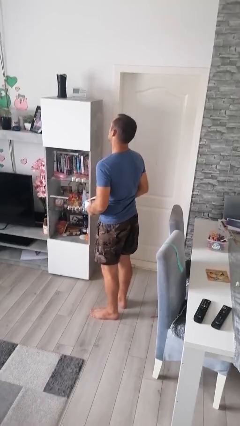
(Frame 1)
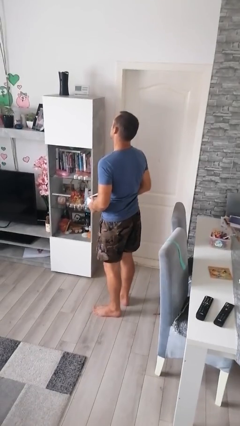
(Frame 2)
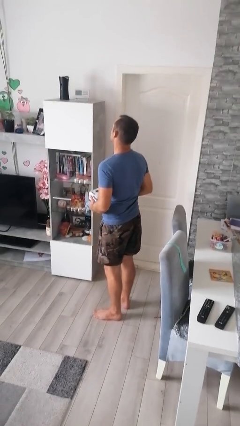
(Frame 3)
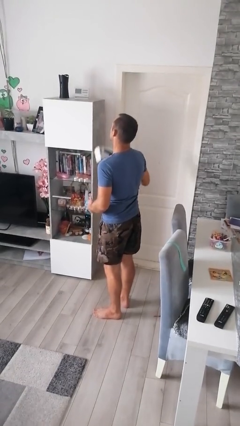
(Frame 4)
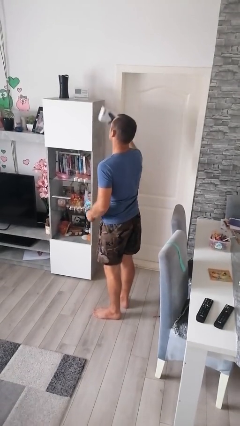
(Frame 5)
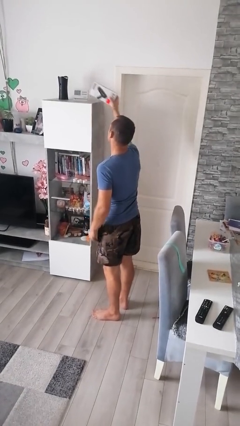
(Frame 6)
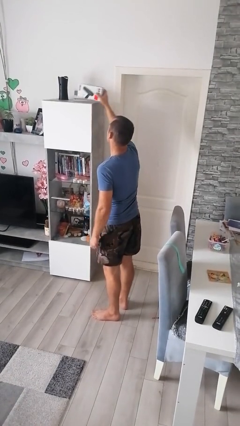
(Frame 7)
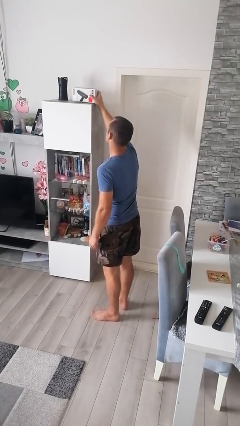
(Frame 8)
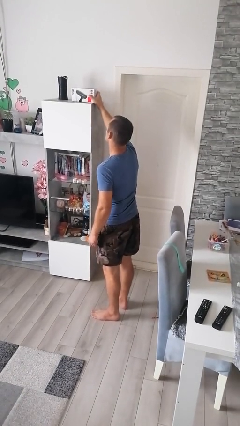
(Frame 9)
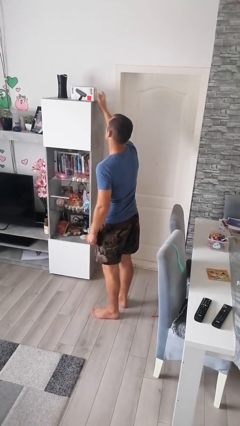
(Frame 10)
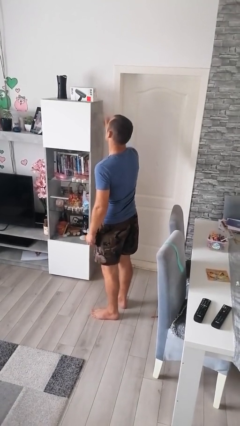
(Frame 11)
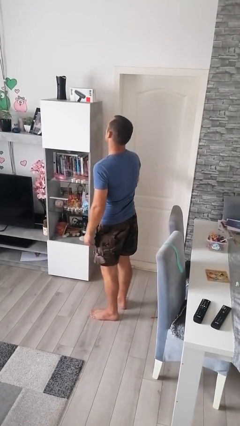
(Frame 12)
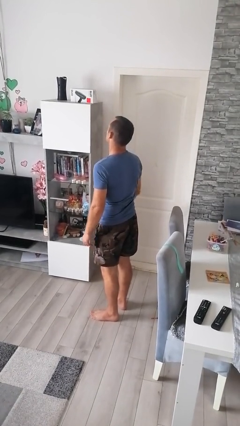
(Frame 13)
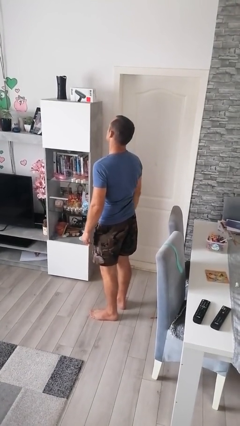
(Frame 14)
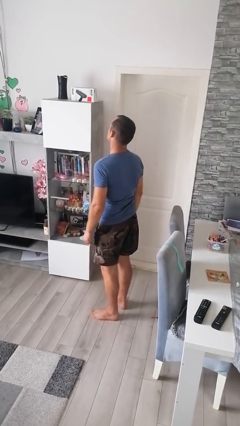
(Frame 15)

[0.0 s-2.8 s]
person picks up object from shelf

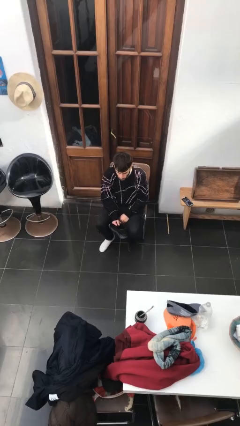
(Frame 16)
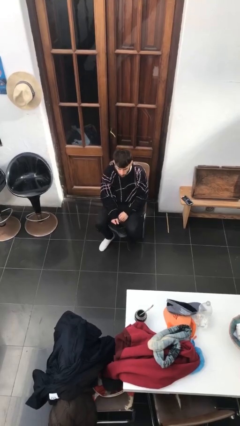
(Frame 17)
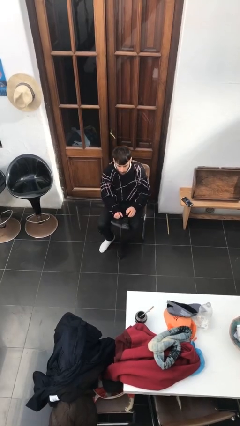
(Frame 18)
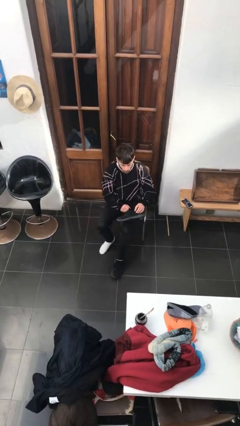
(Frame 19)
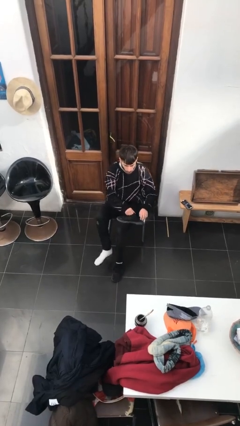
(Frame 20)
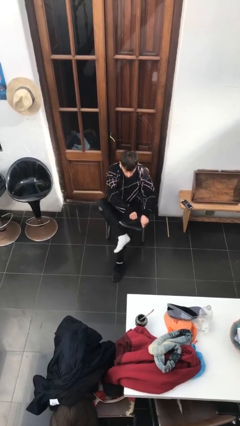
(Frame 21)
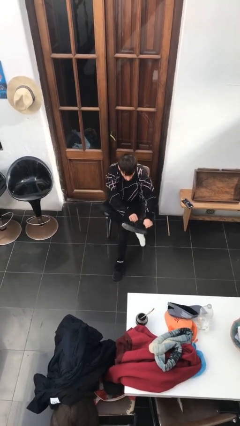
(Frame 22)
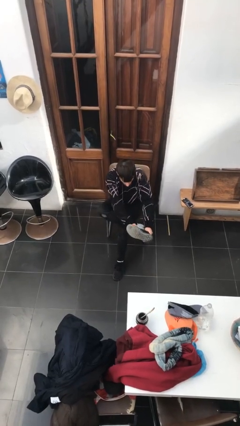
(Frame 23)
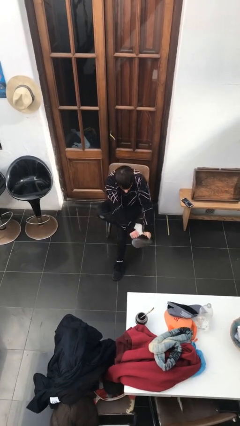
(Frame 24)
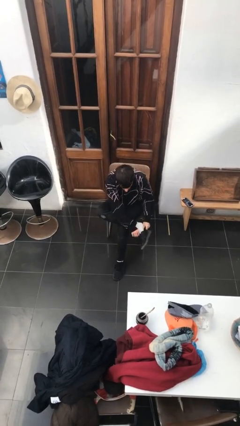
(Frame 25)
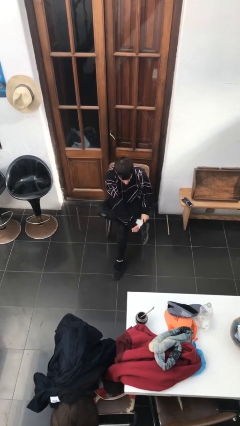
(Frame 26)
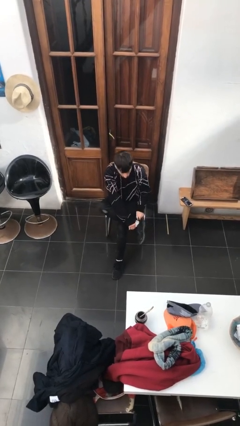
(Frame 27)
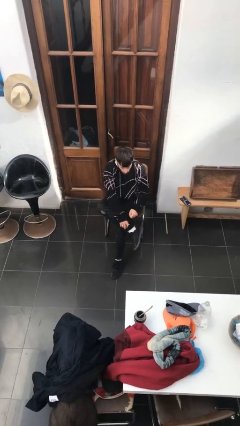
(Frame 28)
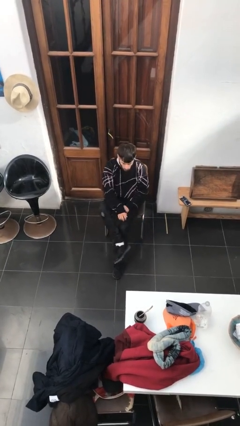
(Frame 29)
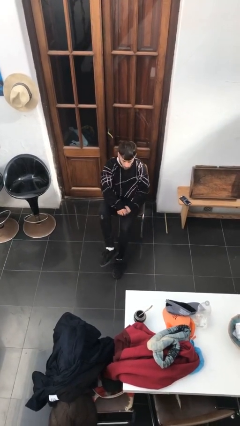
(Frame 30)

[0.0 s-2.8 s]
person puts on shoes

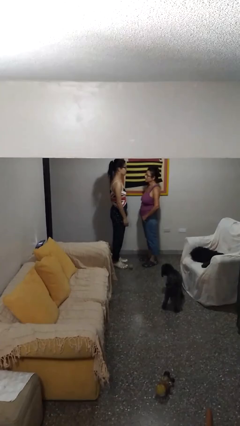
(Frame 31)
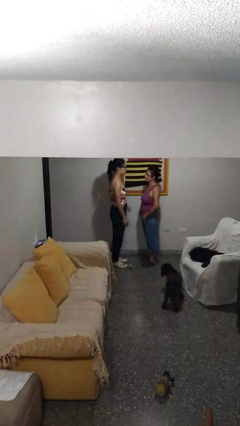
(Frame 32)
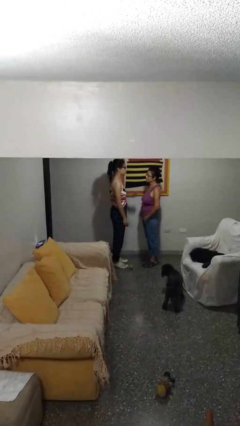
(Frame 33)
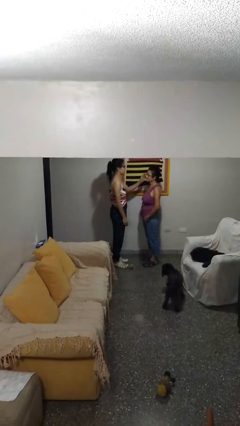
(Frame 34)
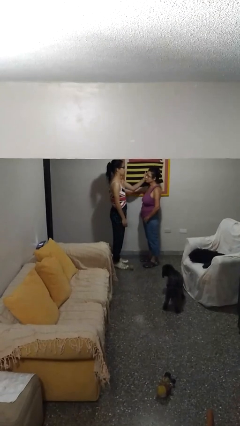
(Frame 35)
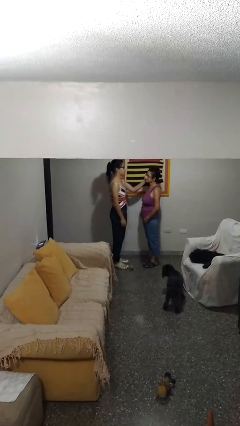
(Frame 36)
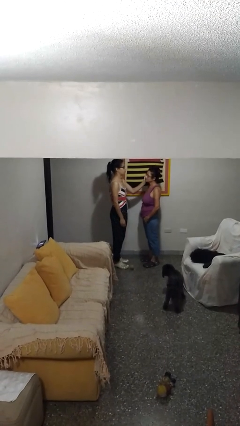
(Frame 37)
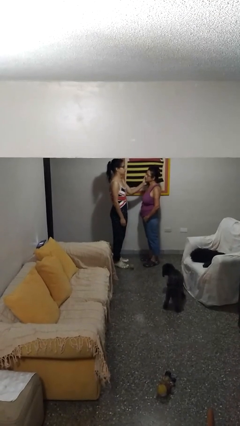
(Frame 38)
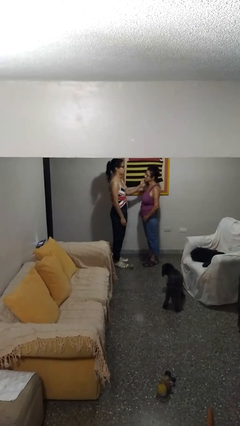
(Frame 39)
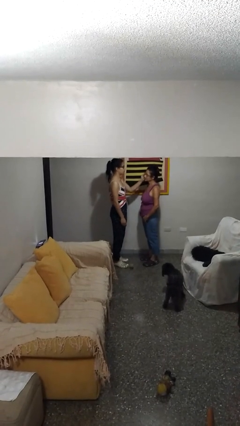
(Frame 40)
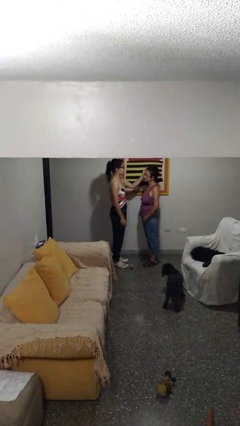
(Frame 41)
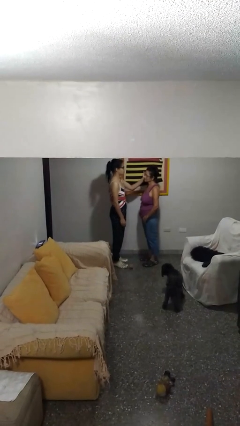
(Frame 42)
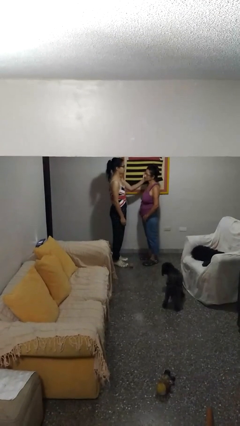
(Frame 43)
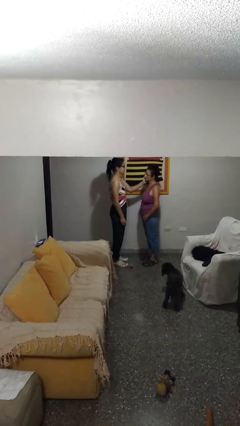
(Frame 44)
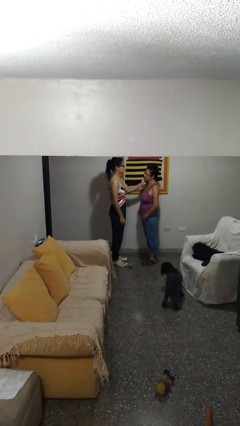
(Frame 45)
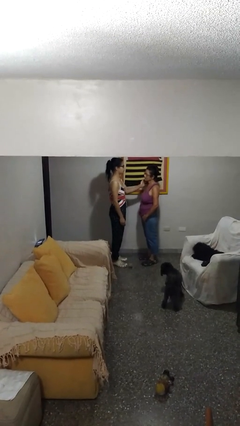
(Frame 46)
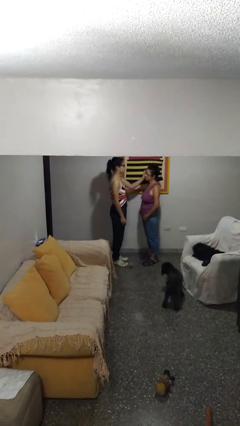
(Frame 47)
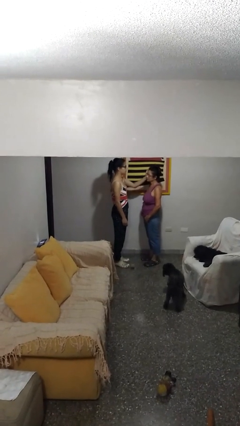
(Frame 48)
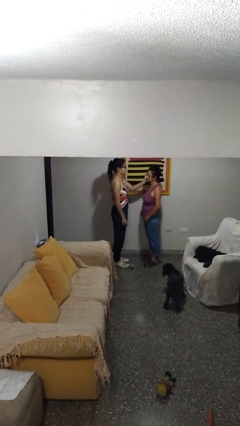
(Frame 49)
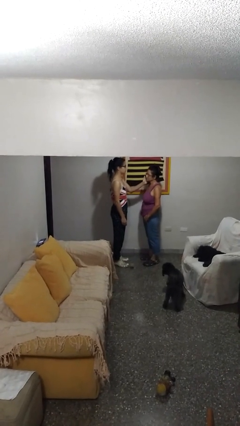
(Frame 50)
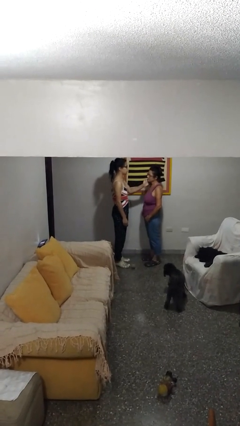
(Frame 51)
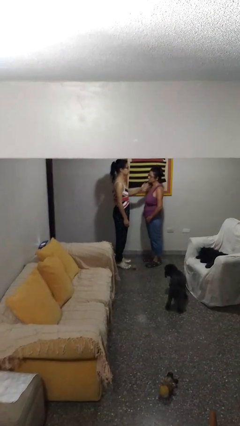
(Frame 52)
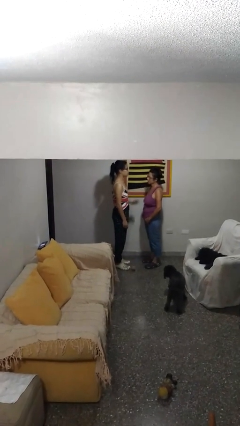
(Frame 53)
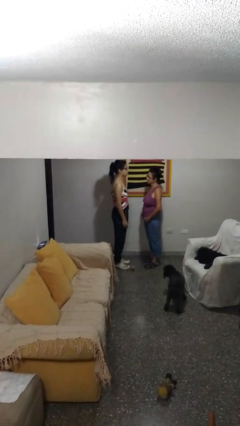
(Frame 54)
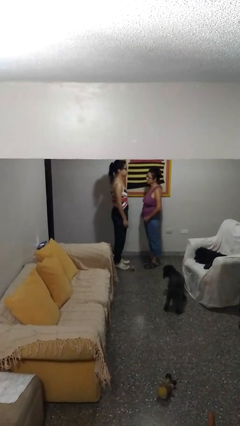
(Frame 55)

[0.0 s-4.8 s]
person touches face of person

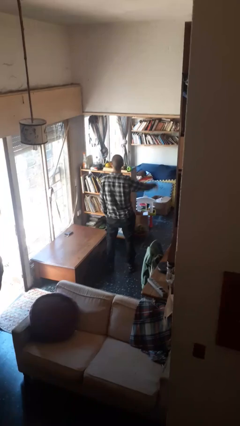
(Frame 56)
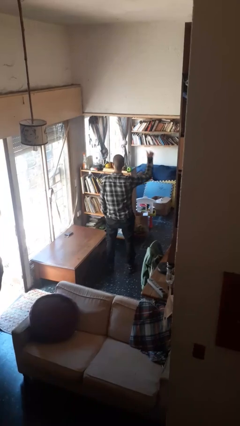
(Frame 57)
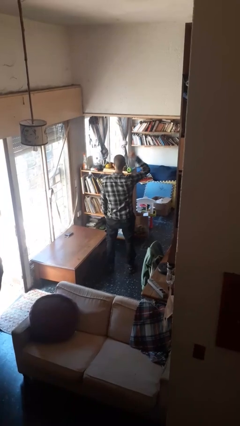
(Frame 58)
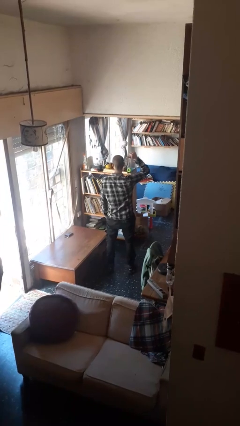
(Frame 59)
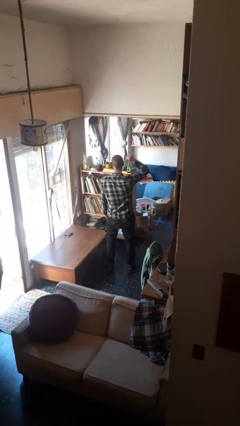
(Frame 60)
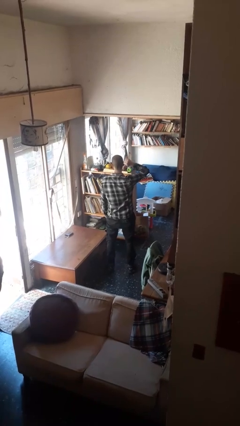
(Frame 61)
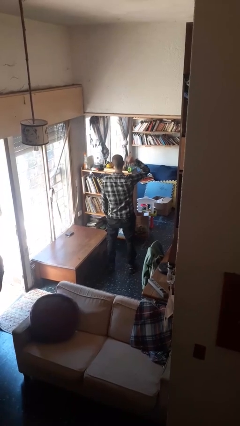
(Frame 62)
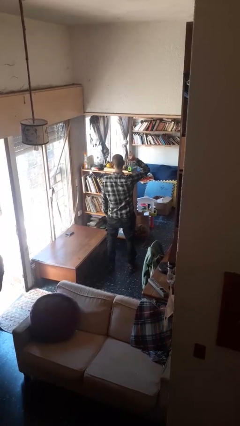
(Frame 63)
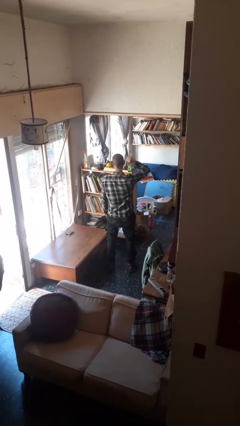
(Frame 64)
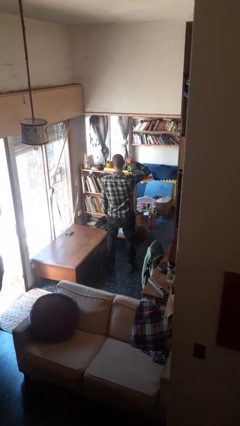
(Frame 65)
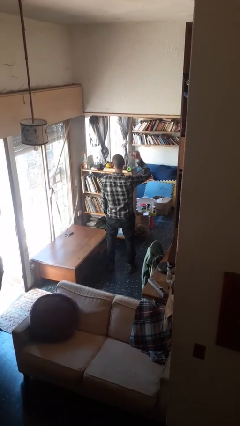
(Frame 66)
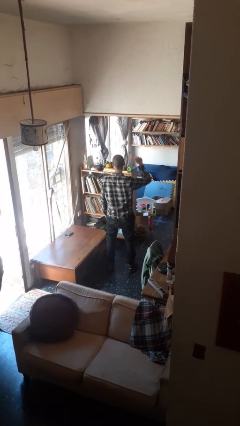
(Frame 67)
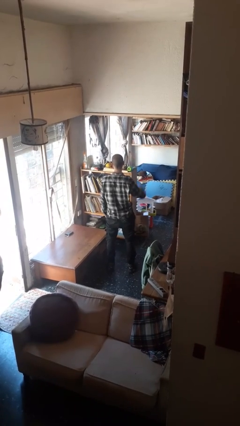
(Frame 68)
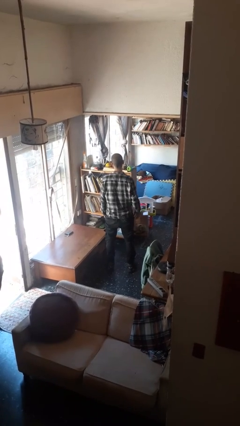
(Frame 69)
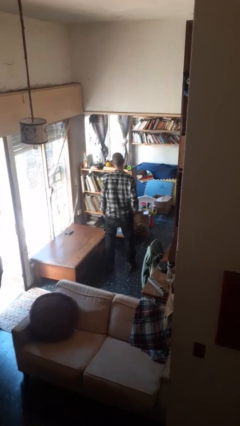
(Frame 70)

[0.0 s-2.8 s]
person gestures behind me

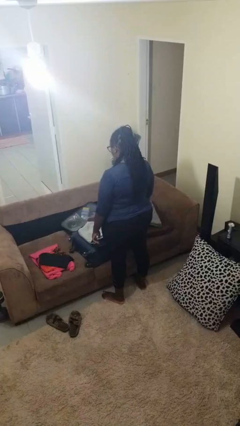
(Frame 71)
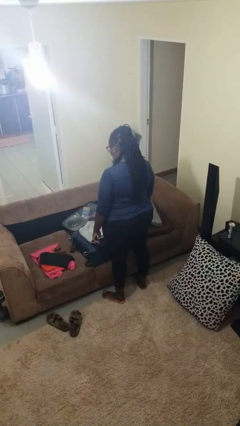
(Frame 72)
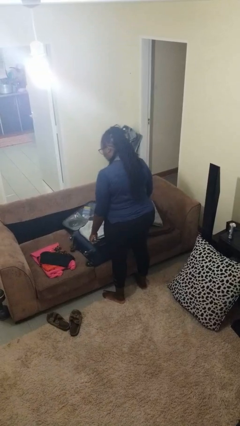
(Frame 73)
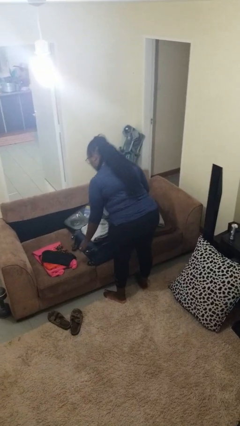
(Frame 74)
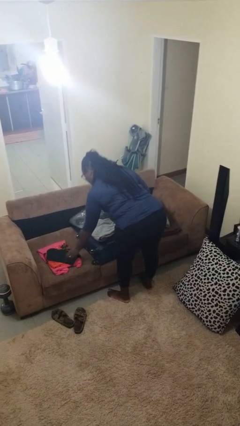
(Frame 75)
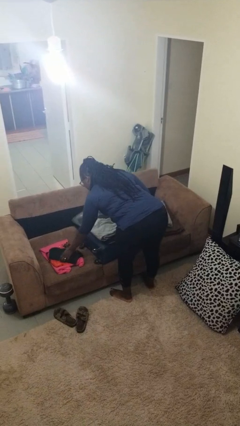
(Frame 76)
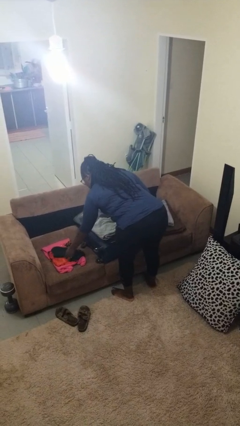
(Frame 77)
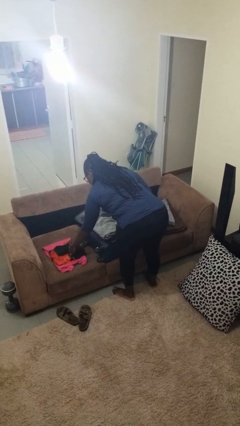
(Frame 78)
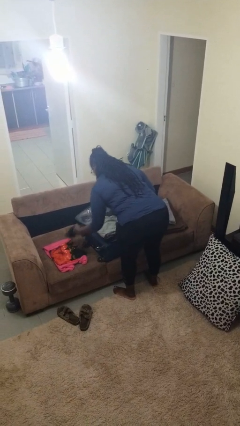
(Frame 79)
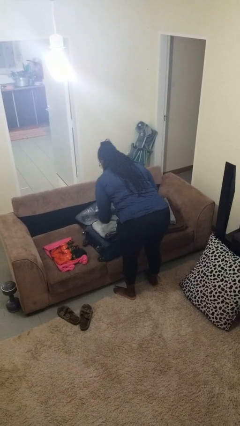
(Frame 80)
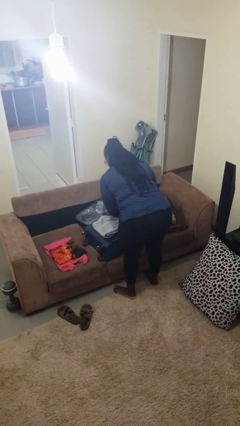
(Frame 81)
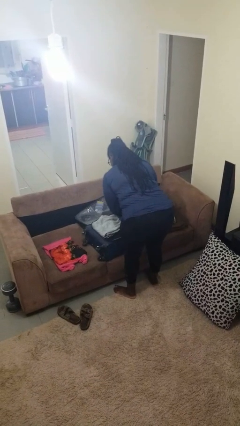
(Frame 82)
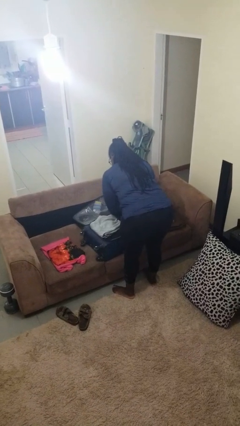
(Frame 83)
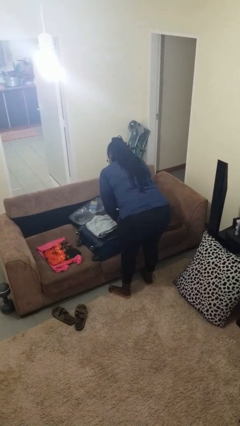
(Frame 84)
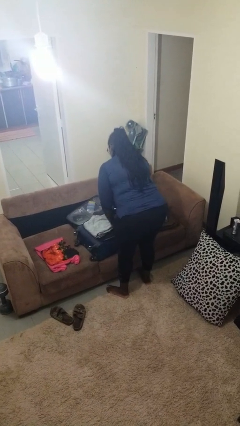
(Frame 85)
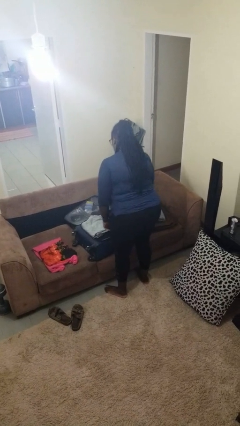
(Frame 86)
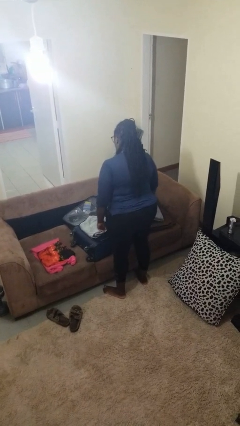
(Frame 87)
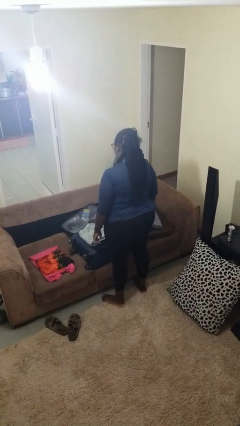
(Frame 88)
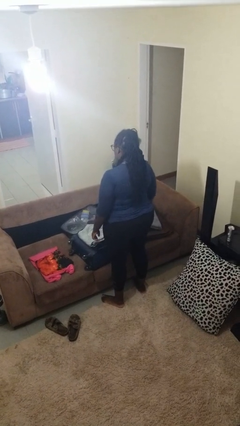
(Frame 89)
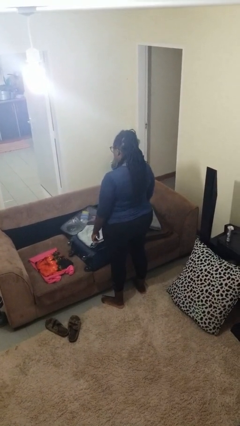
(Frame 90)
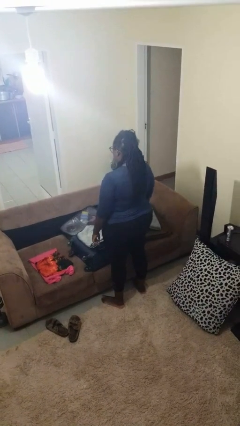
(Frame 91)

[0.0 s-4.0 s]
person loads clothes into suitcase

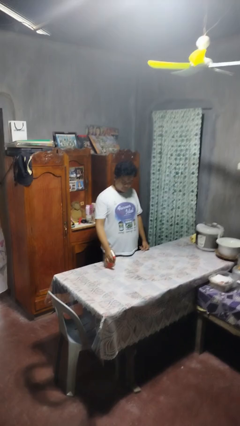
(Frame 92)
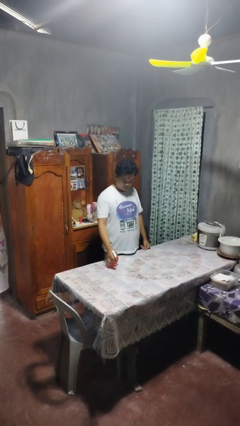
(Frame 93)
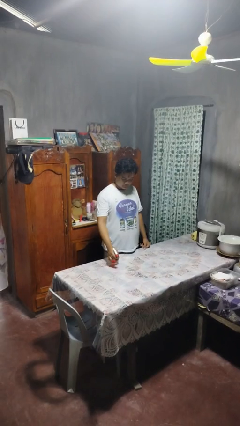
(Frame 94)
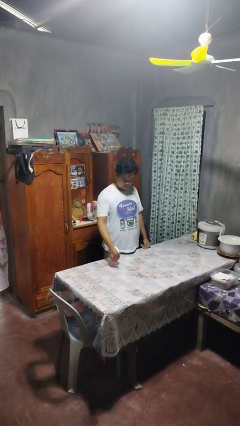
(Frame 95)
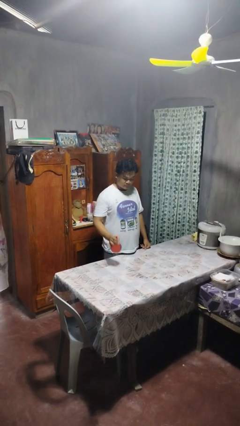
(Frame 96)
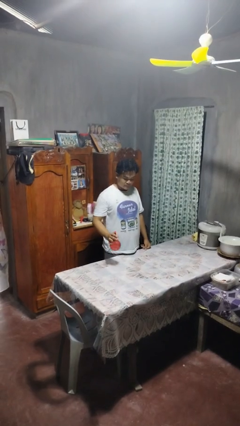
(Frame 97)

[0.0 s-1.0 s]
person sprays from bottle
